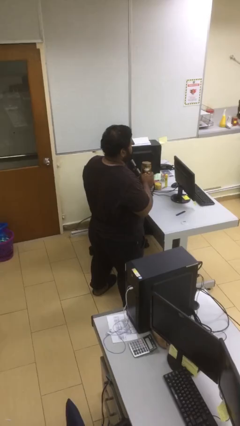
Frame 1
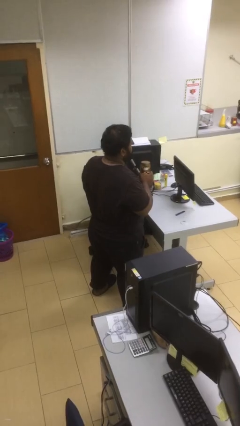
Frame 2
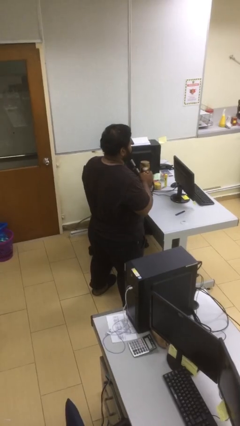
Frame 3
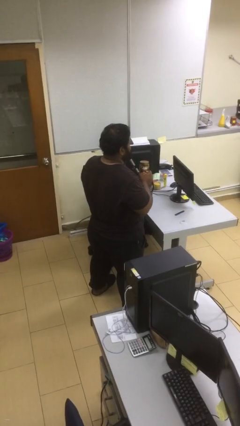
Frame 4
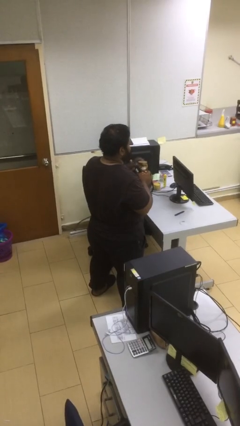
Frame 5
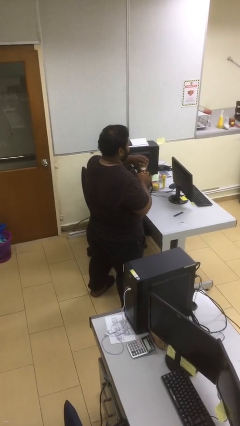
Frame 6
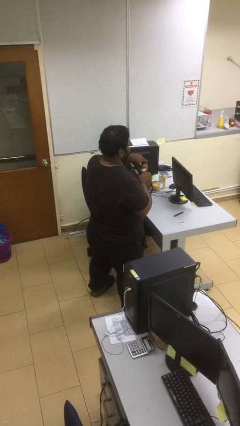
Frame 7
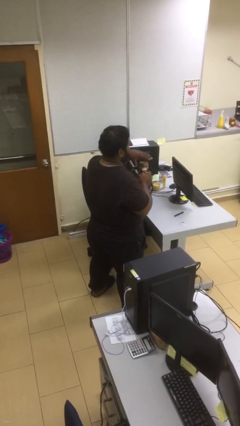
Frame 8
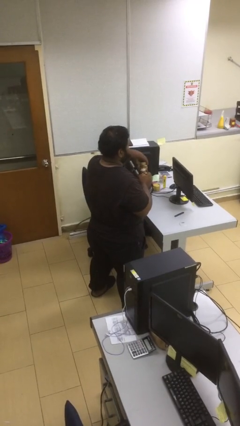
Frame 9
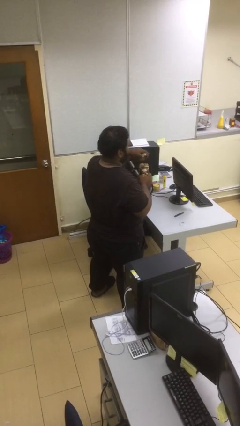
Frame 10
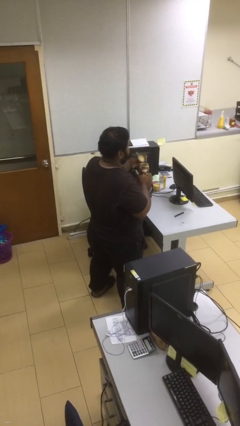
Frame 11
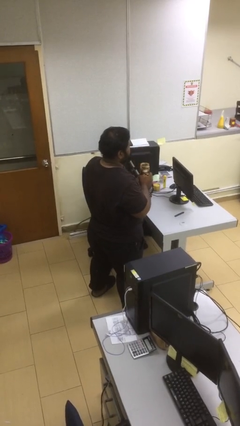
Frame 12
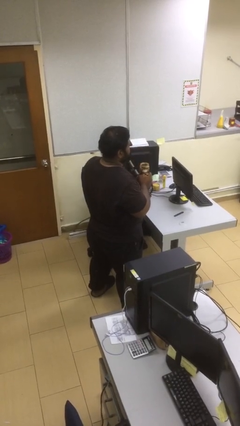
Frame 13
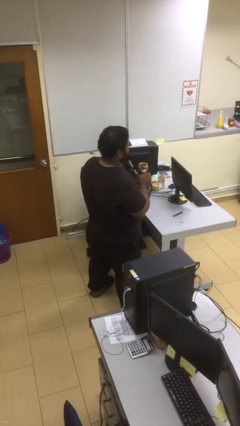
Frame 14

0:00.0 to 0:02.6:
person opens jar

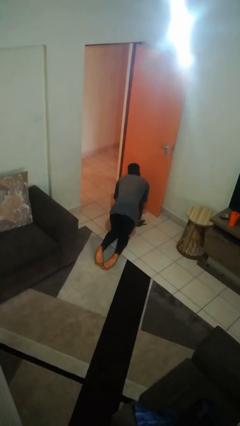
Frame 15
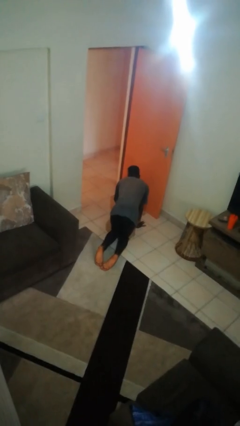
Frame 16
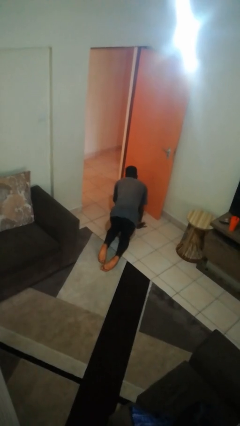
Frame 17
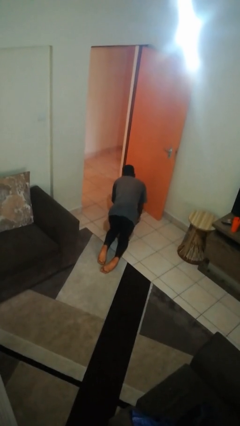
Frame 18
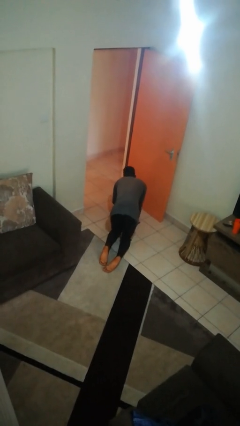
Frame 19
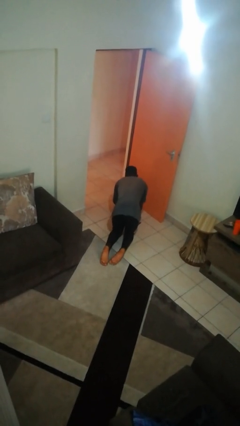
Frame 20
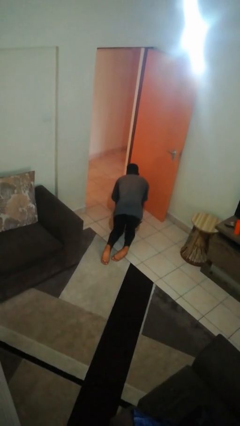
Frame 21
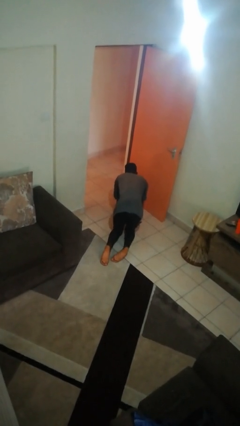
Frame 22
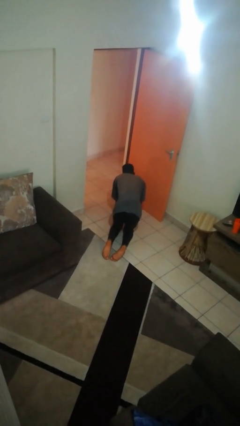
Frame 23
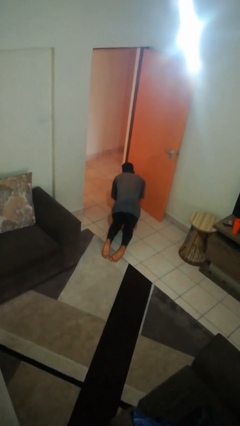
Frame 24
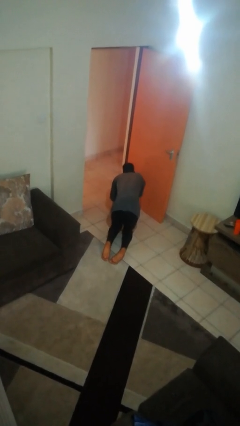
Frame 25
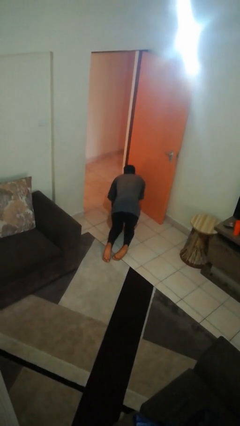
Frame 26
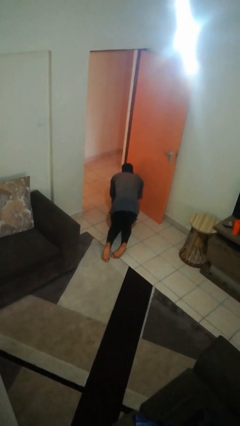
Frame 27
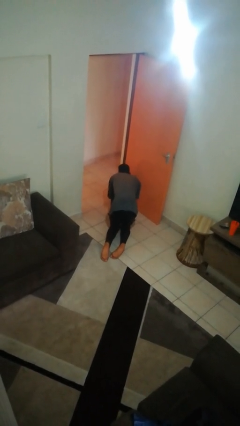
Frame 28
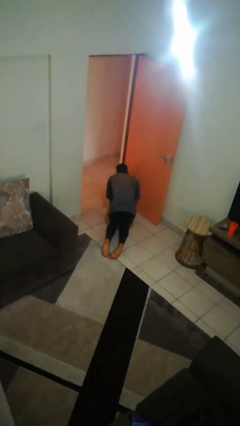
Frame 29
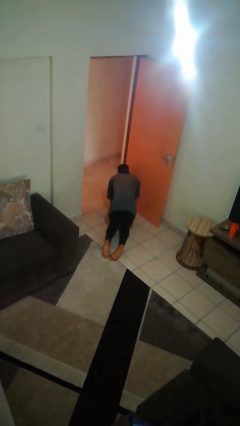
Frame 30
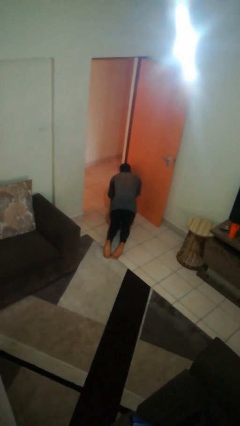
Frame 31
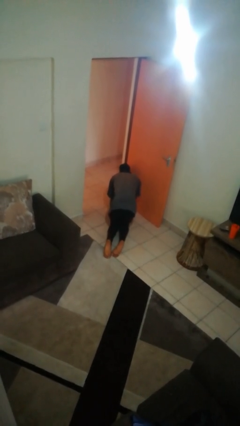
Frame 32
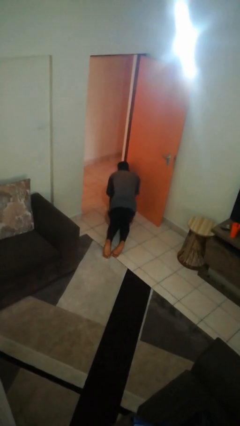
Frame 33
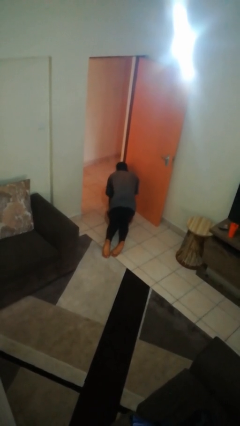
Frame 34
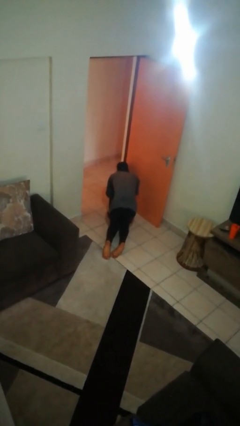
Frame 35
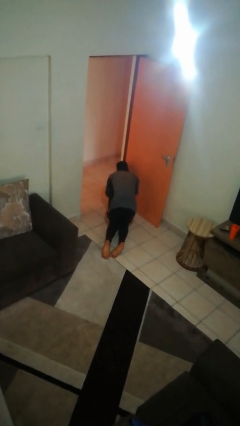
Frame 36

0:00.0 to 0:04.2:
person crawls

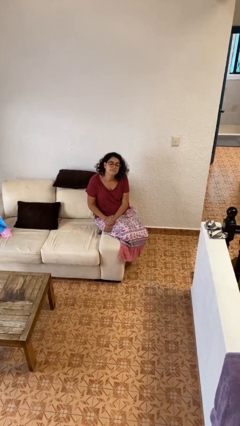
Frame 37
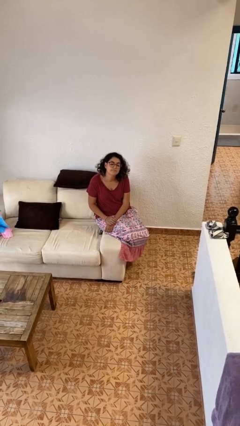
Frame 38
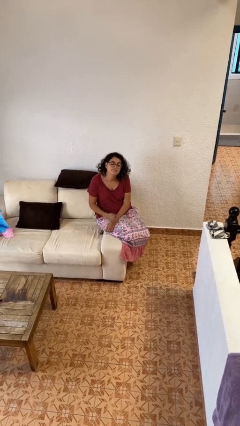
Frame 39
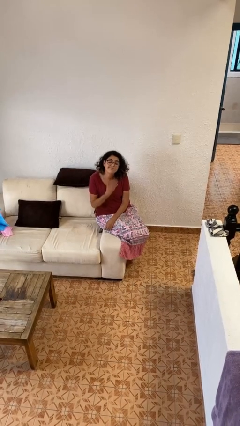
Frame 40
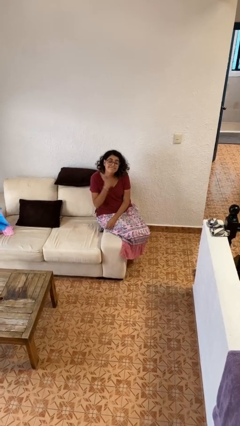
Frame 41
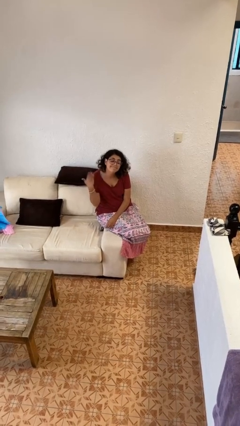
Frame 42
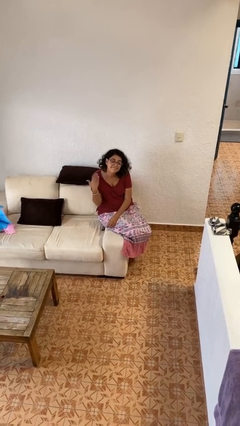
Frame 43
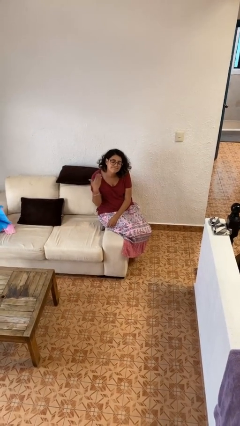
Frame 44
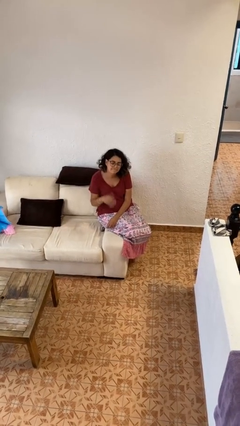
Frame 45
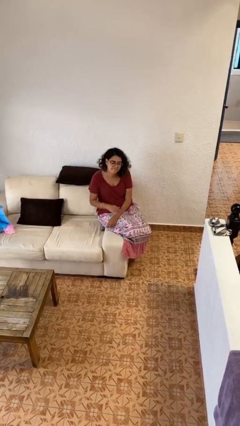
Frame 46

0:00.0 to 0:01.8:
person gestures cut

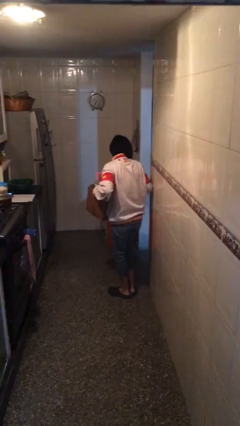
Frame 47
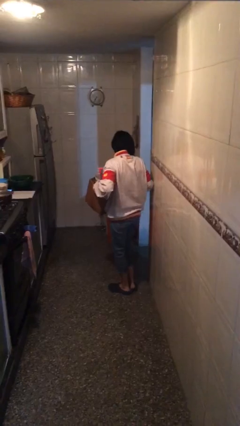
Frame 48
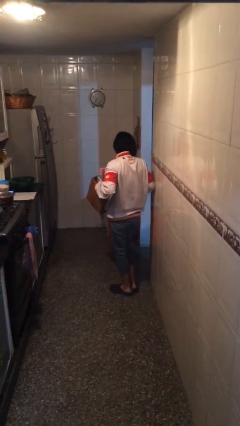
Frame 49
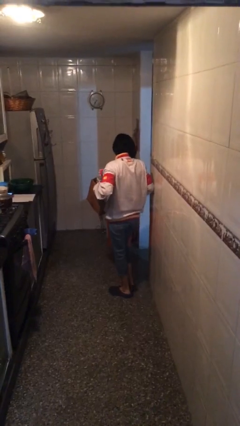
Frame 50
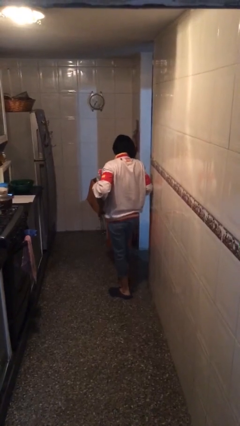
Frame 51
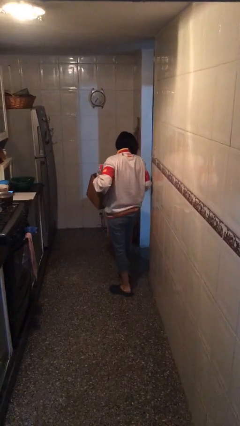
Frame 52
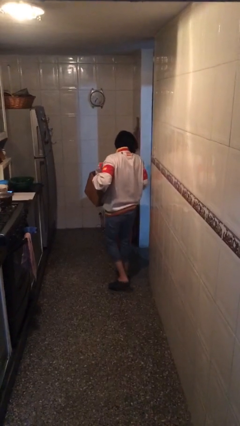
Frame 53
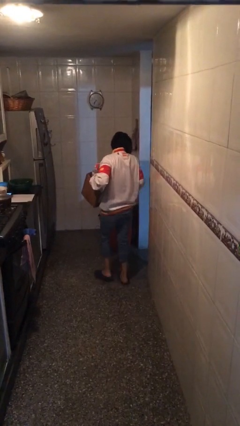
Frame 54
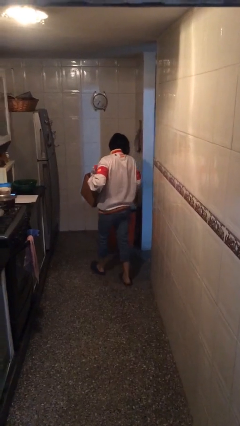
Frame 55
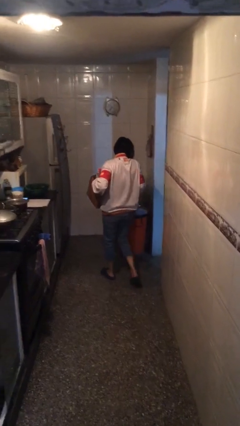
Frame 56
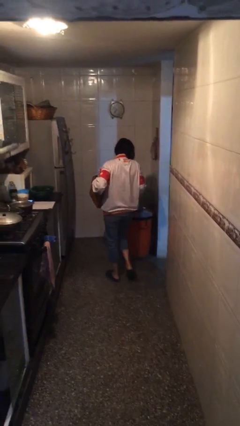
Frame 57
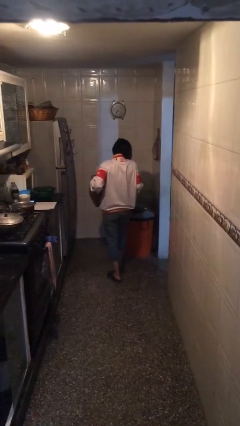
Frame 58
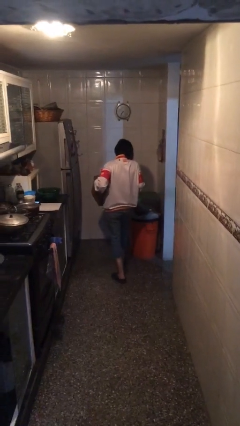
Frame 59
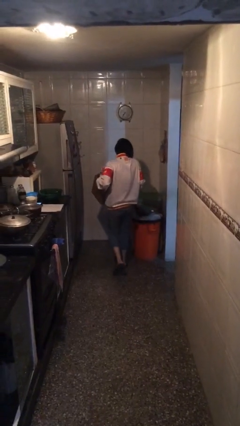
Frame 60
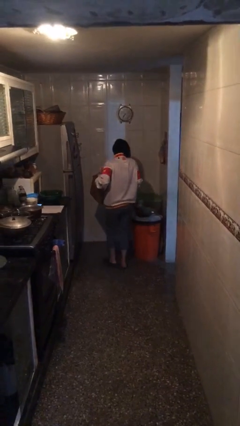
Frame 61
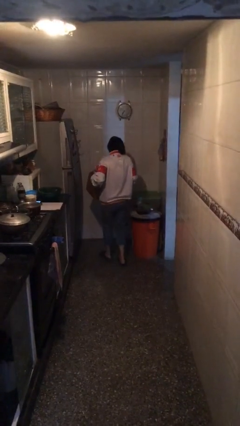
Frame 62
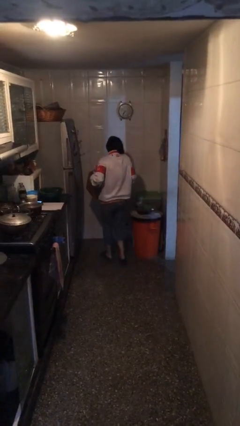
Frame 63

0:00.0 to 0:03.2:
person carries heavy object

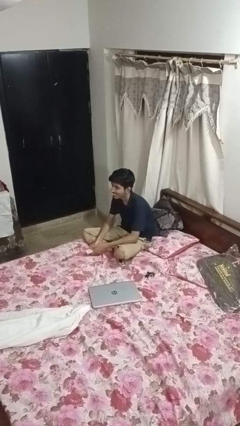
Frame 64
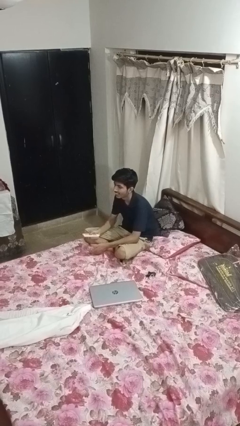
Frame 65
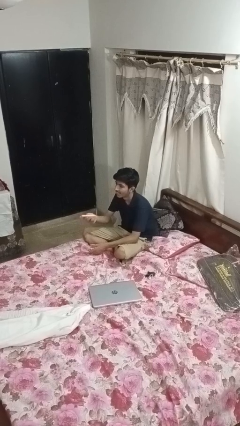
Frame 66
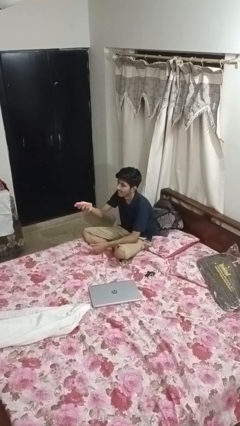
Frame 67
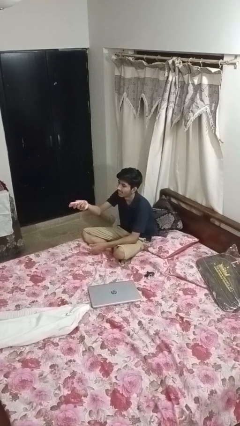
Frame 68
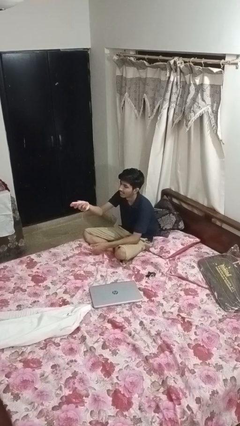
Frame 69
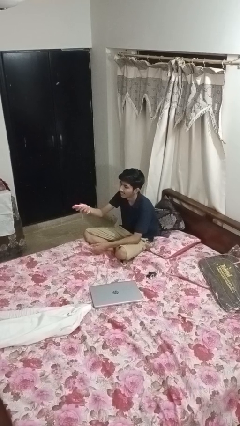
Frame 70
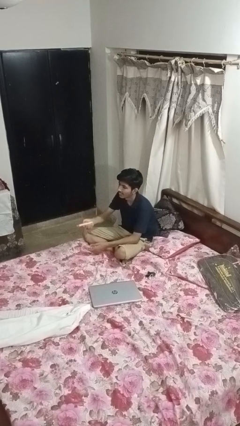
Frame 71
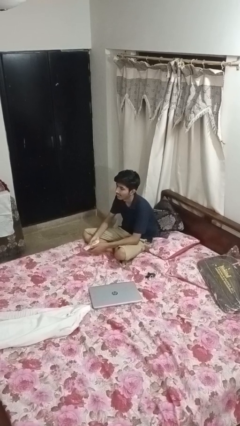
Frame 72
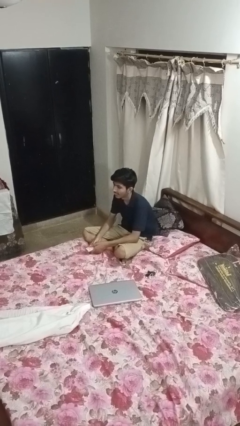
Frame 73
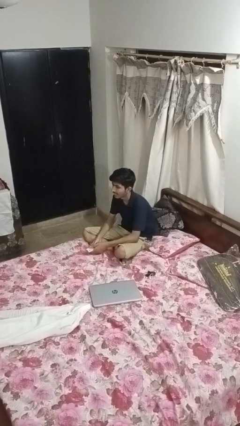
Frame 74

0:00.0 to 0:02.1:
person uses television remote

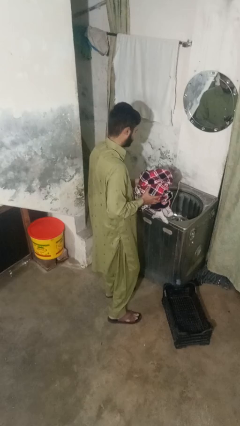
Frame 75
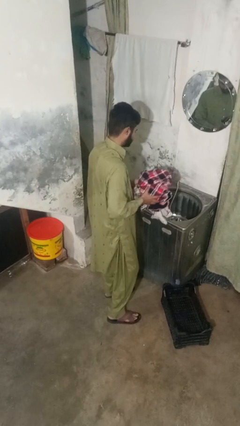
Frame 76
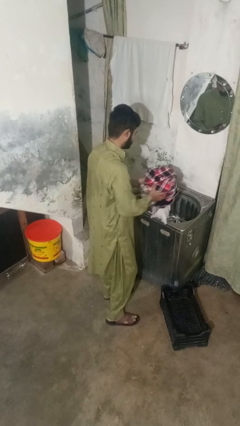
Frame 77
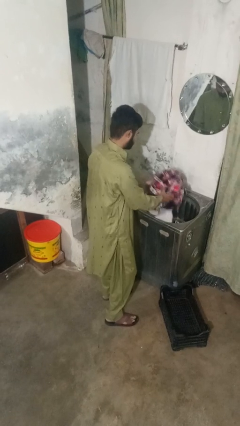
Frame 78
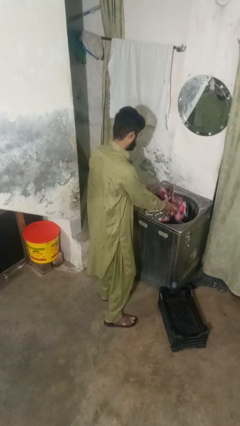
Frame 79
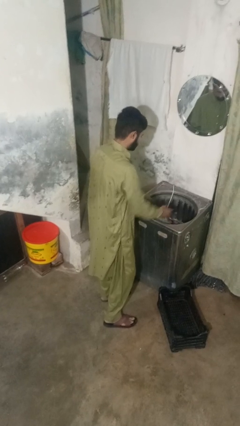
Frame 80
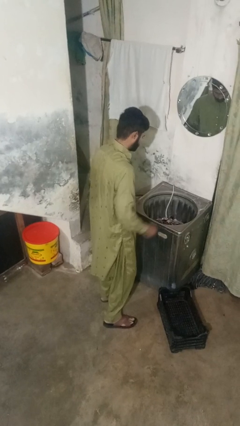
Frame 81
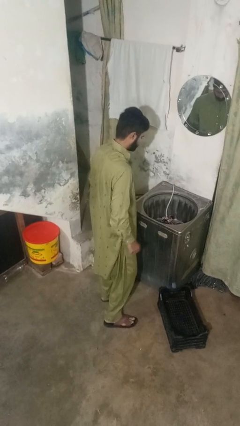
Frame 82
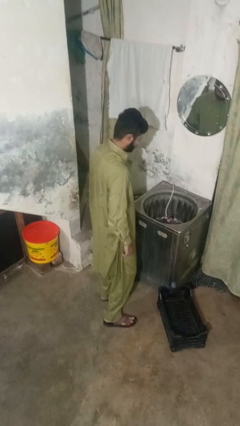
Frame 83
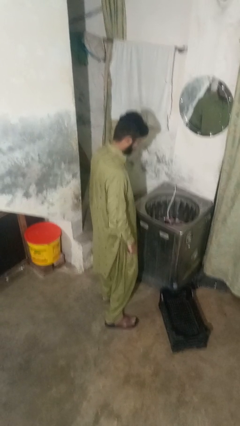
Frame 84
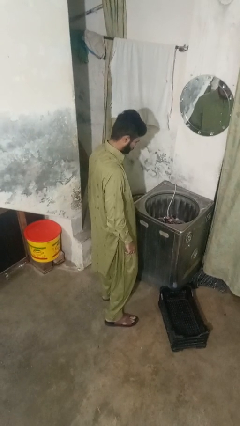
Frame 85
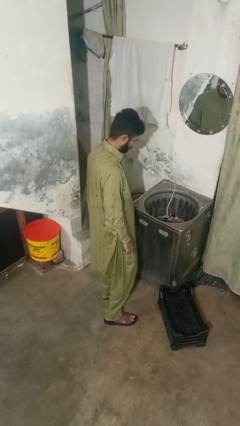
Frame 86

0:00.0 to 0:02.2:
person loads clotheswasher

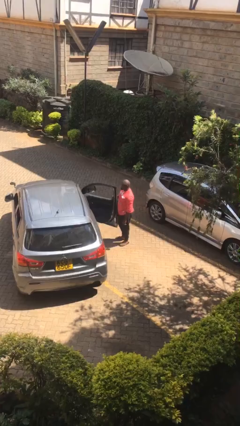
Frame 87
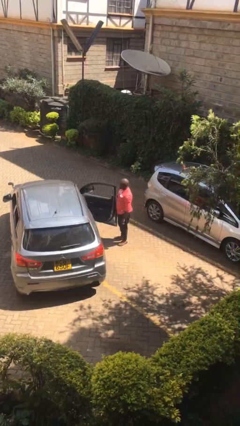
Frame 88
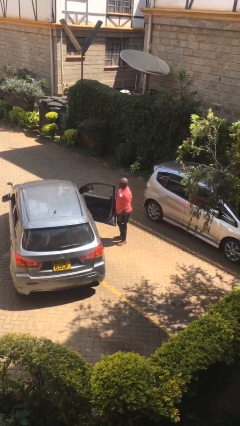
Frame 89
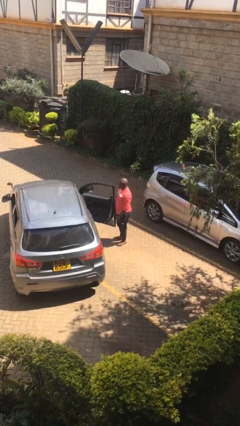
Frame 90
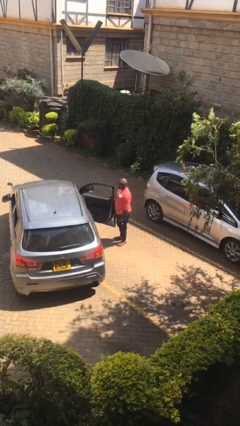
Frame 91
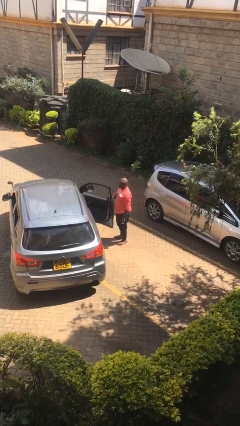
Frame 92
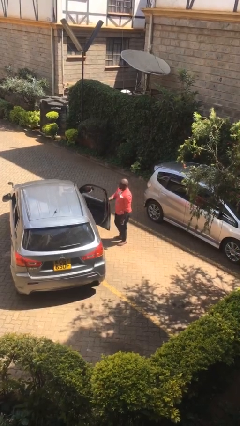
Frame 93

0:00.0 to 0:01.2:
person opens car door
